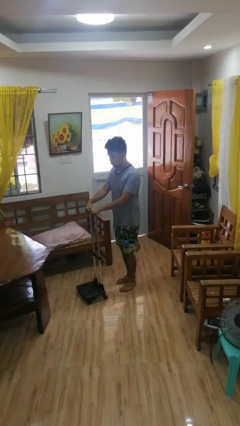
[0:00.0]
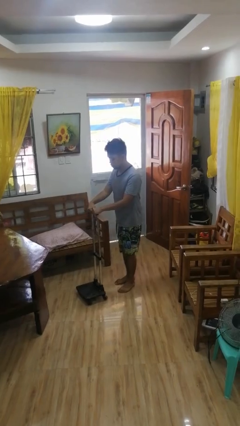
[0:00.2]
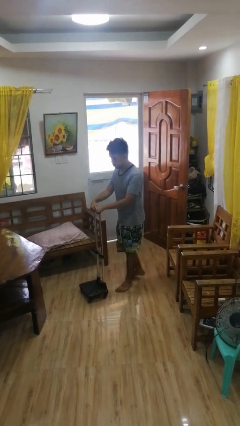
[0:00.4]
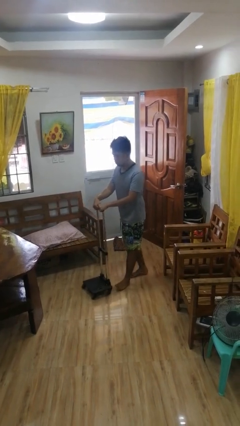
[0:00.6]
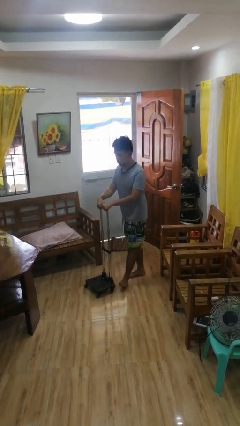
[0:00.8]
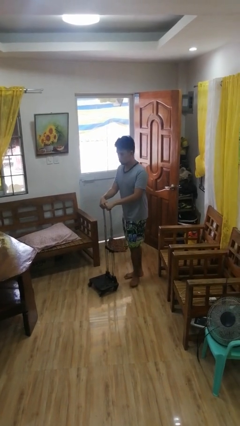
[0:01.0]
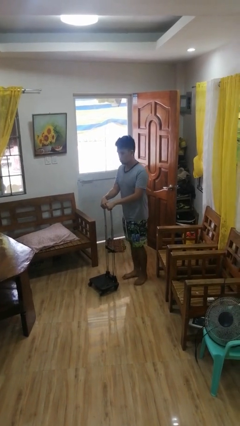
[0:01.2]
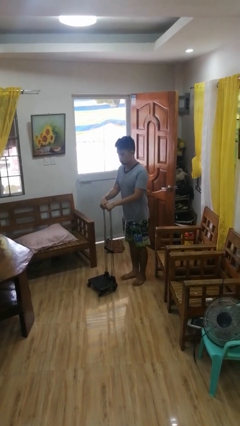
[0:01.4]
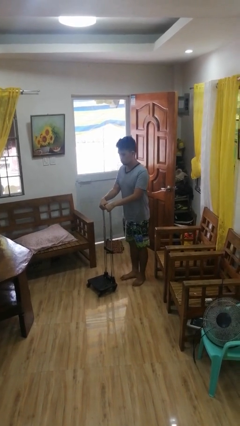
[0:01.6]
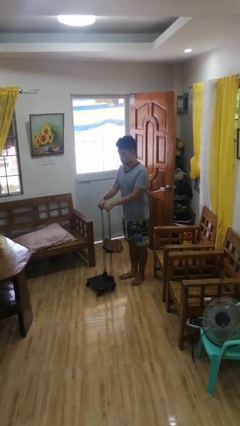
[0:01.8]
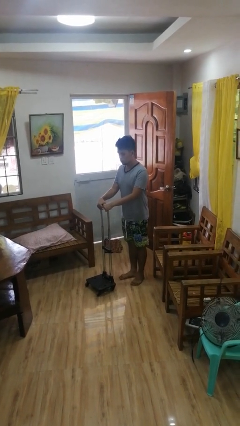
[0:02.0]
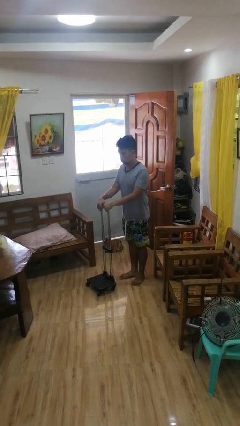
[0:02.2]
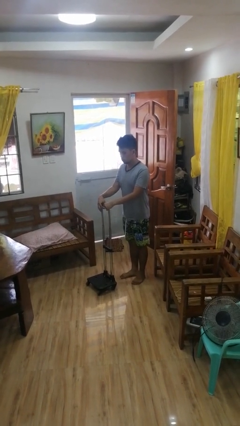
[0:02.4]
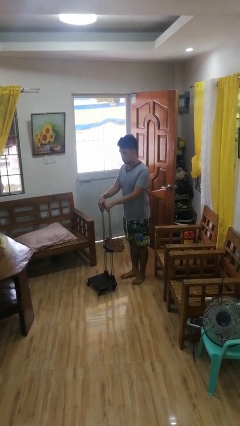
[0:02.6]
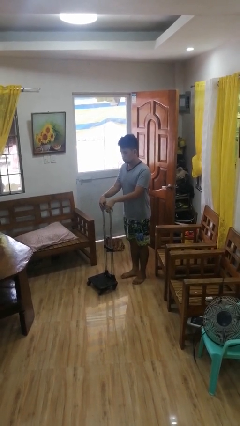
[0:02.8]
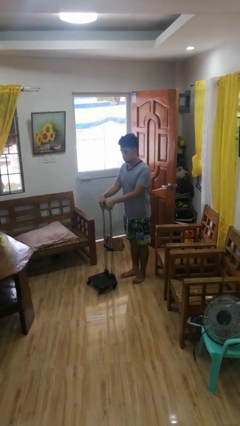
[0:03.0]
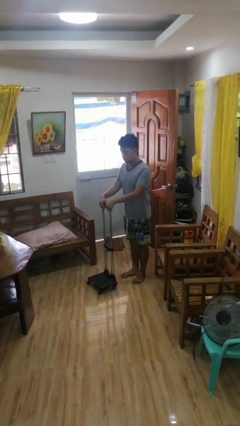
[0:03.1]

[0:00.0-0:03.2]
person pulls wheeled cart

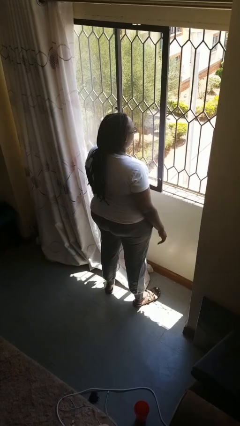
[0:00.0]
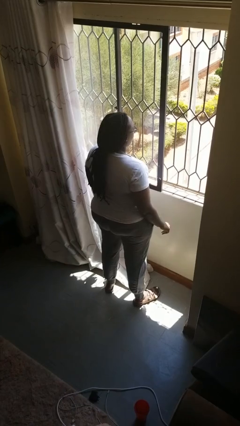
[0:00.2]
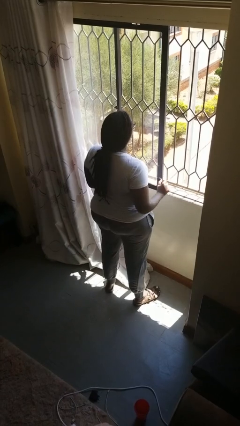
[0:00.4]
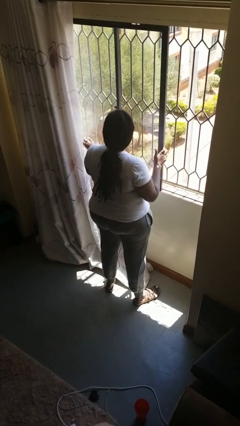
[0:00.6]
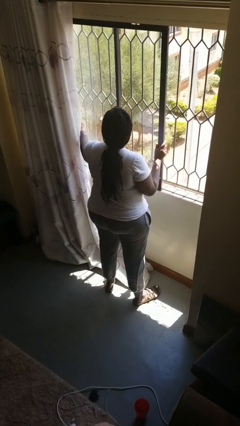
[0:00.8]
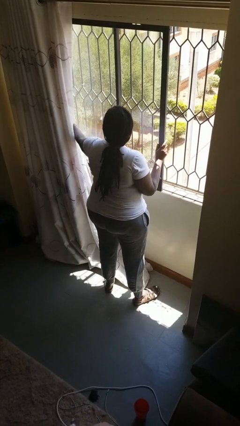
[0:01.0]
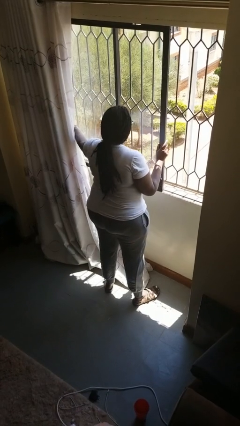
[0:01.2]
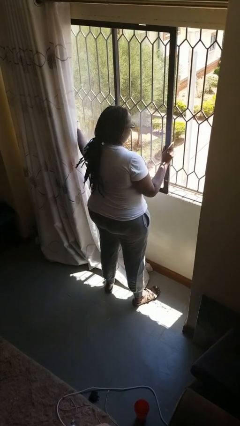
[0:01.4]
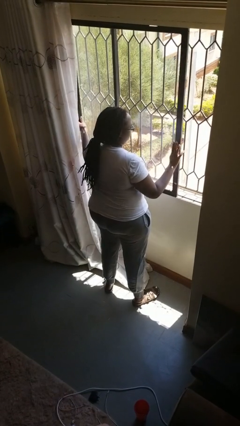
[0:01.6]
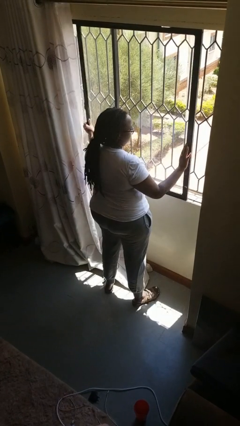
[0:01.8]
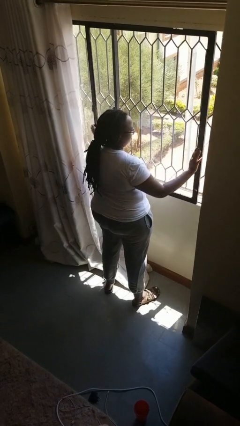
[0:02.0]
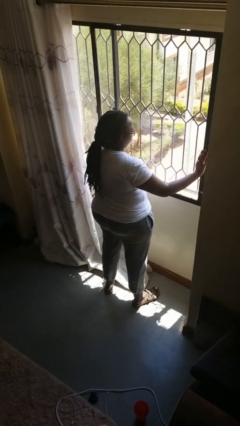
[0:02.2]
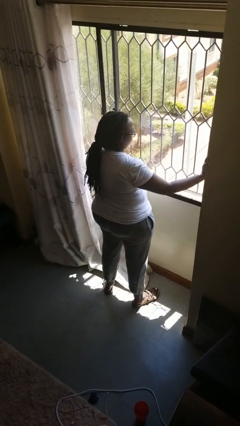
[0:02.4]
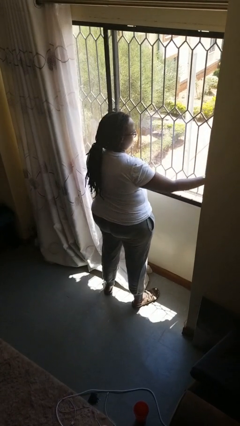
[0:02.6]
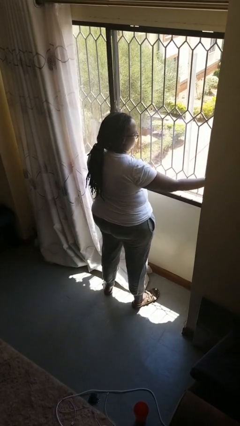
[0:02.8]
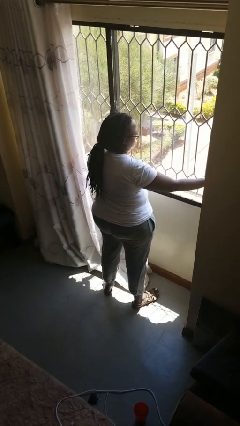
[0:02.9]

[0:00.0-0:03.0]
person closes home window

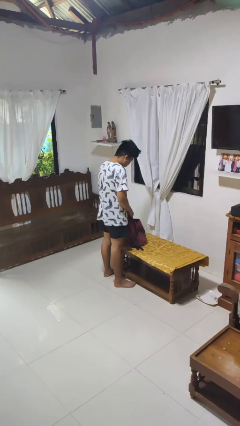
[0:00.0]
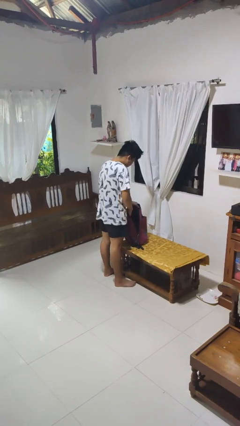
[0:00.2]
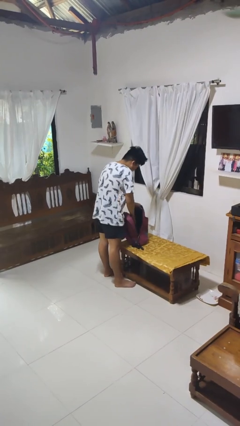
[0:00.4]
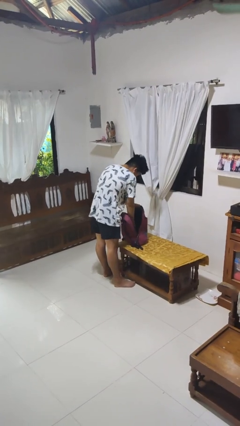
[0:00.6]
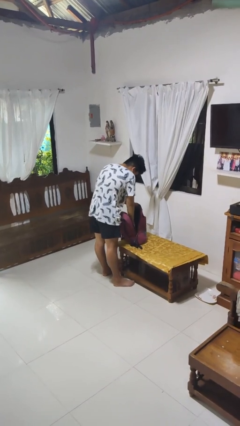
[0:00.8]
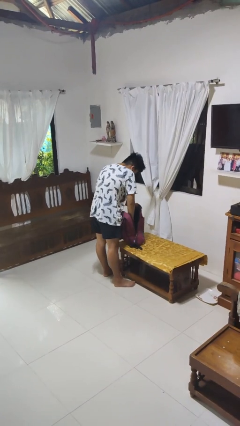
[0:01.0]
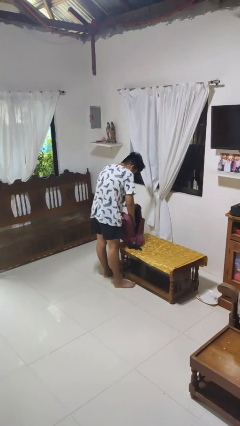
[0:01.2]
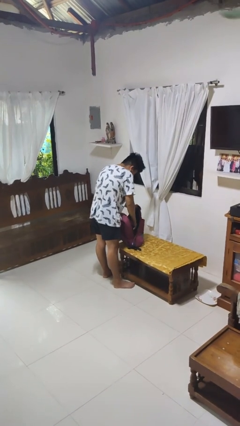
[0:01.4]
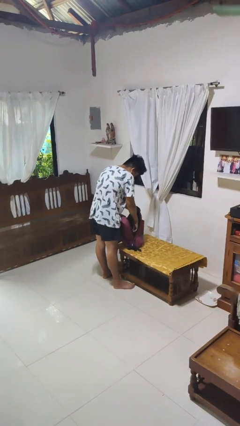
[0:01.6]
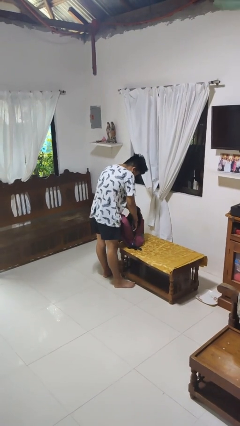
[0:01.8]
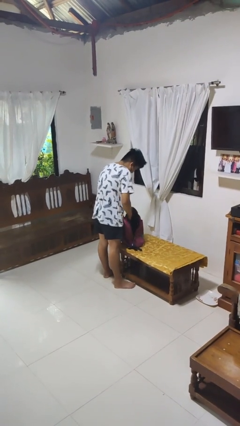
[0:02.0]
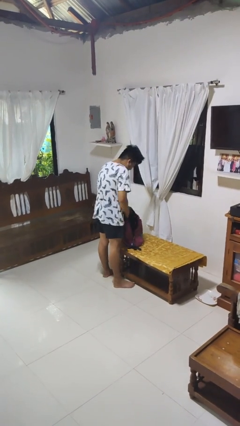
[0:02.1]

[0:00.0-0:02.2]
person searches in bag

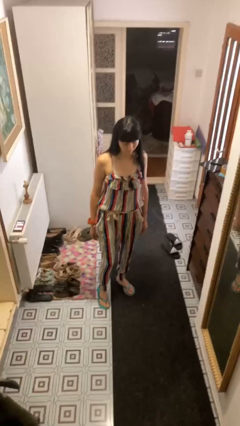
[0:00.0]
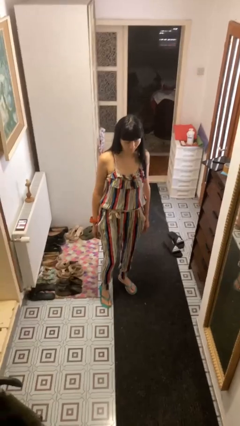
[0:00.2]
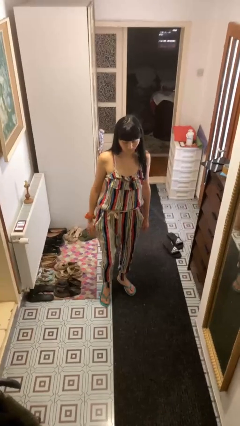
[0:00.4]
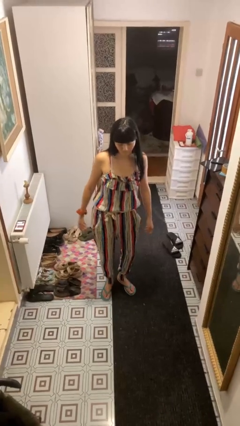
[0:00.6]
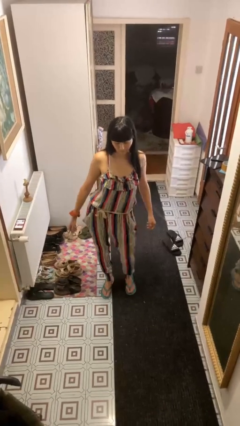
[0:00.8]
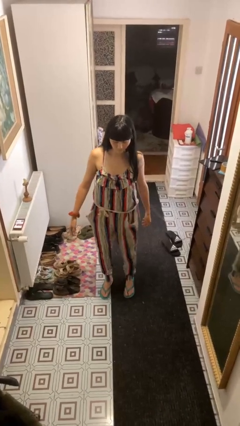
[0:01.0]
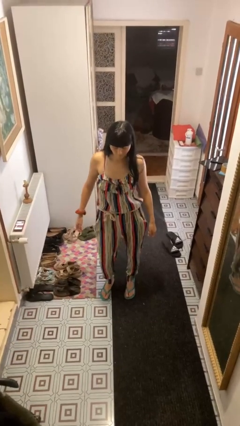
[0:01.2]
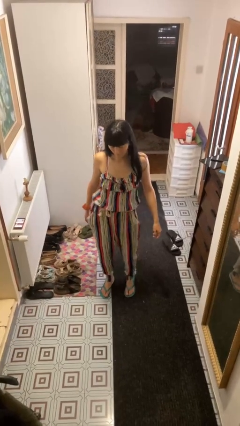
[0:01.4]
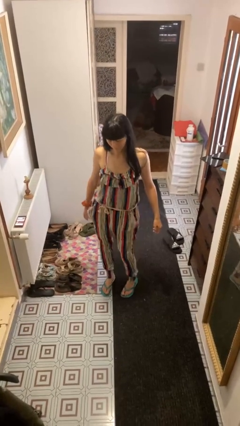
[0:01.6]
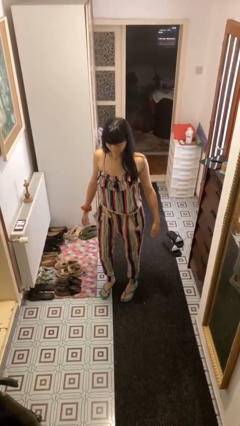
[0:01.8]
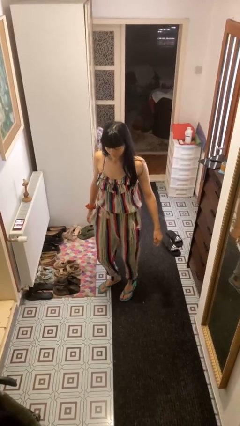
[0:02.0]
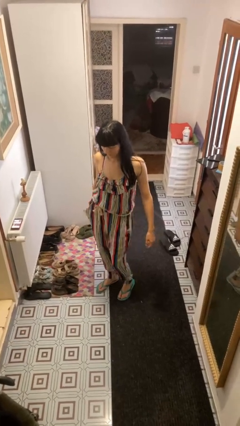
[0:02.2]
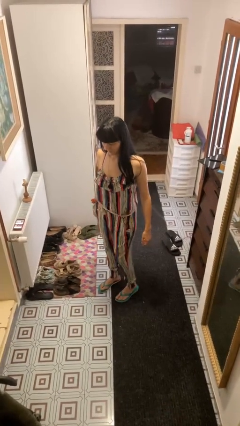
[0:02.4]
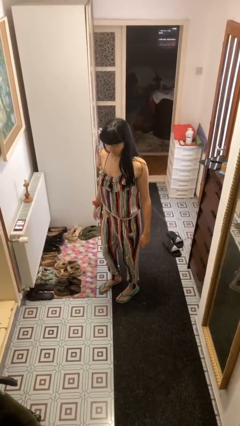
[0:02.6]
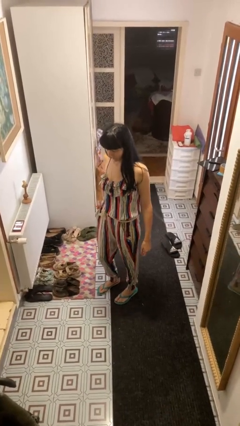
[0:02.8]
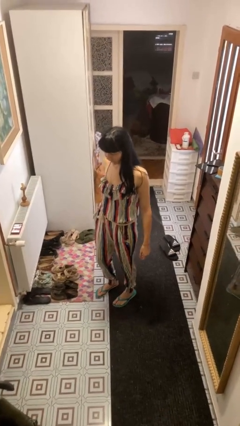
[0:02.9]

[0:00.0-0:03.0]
person wiggles hips

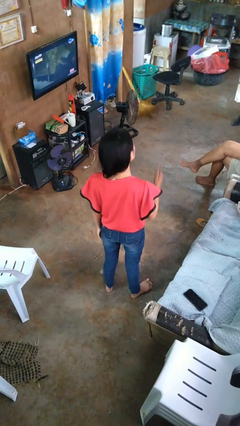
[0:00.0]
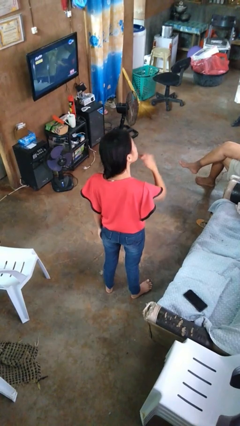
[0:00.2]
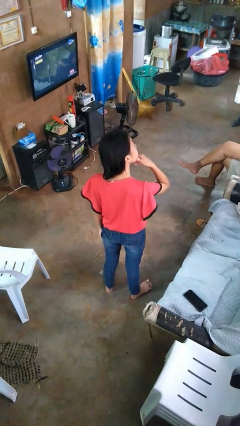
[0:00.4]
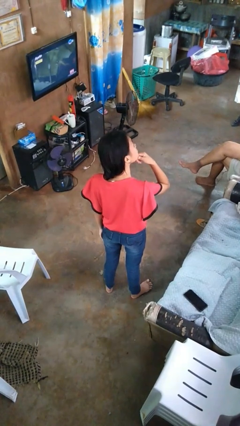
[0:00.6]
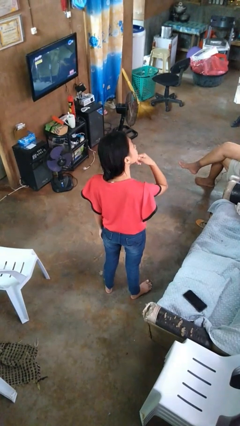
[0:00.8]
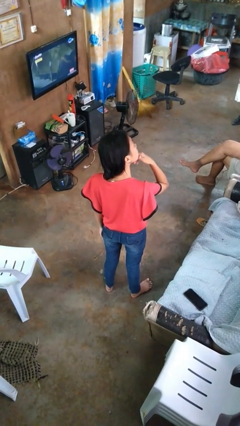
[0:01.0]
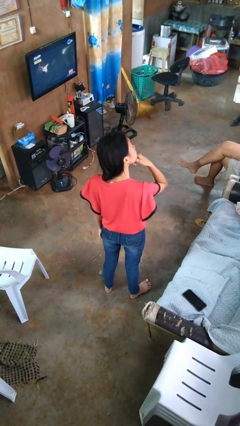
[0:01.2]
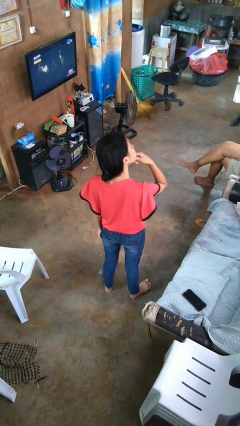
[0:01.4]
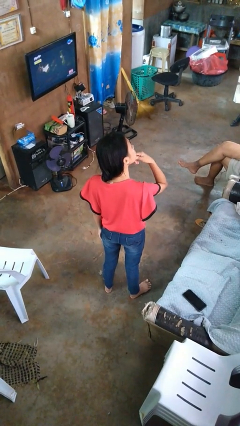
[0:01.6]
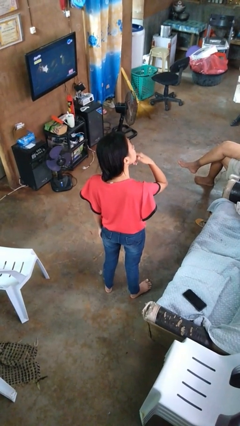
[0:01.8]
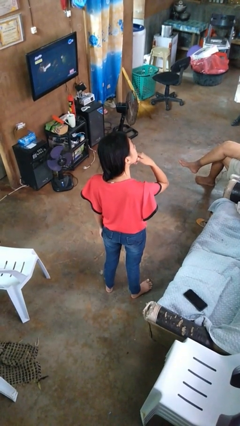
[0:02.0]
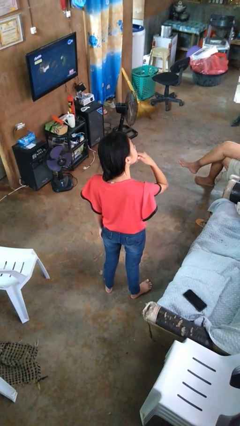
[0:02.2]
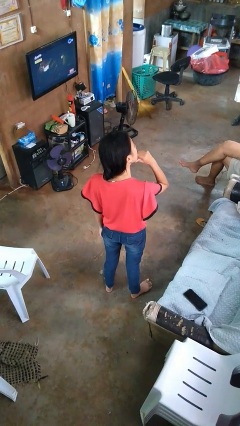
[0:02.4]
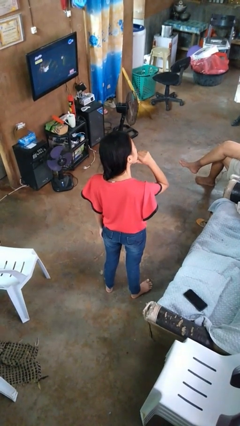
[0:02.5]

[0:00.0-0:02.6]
person strokes chin

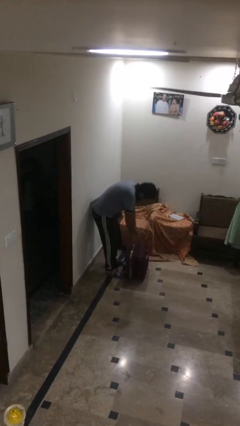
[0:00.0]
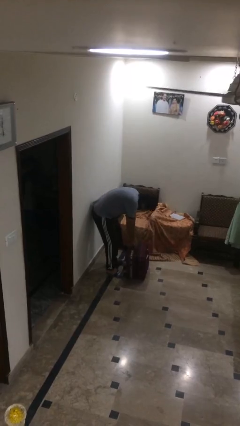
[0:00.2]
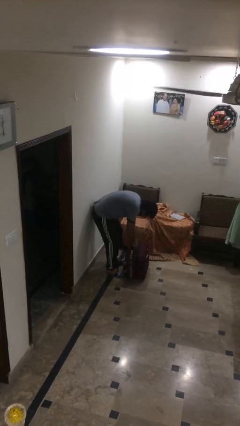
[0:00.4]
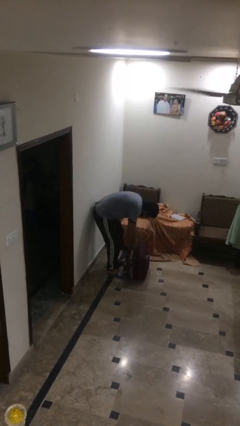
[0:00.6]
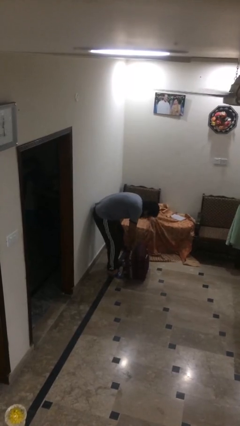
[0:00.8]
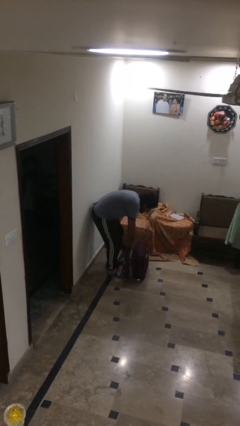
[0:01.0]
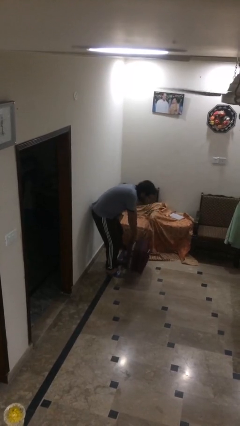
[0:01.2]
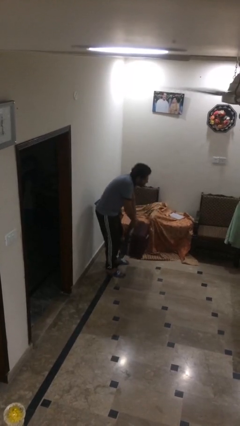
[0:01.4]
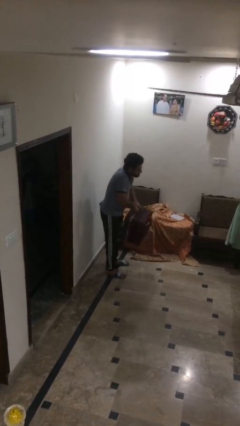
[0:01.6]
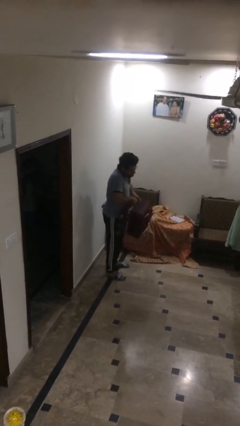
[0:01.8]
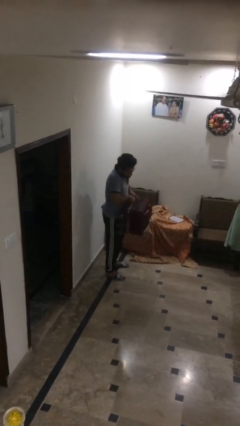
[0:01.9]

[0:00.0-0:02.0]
person picks up object from floor

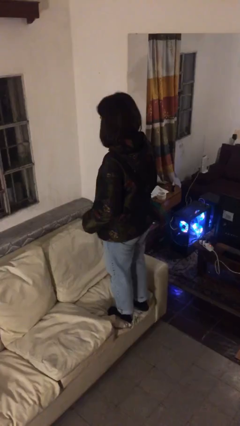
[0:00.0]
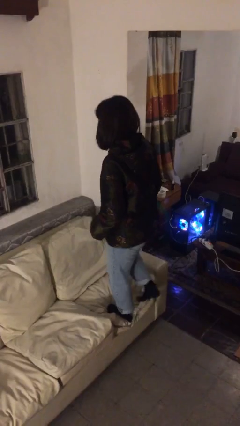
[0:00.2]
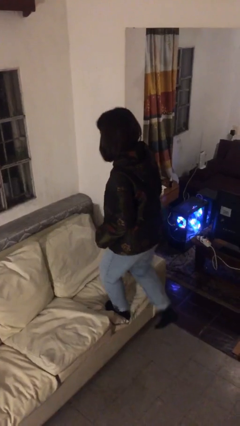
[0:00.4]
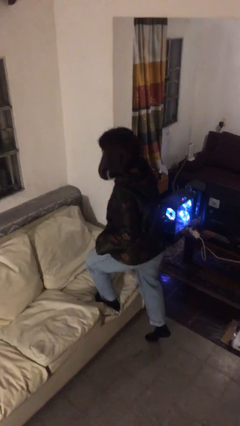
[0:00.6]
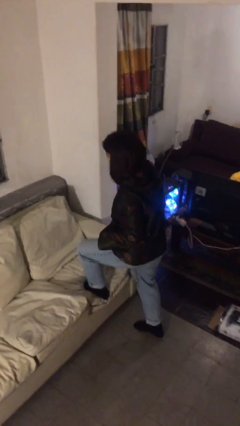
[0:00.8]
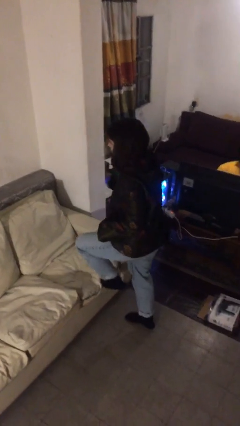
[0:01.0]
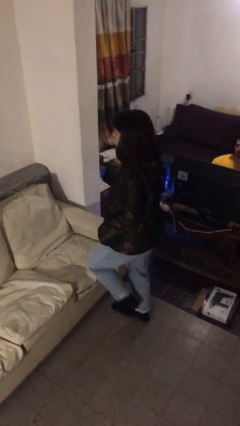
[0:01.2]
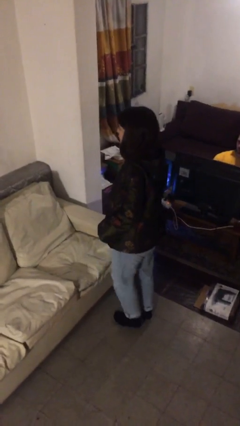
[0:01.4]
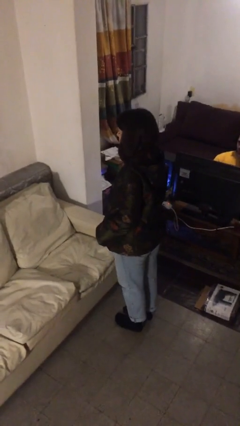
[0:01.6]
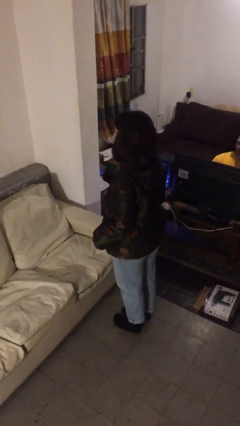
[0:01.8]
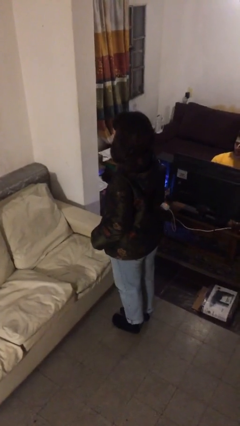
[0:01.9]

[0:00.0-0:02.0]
person climbs off couch
